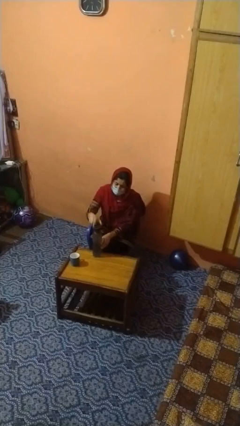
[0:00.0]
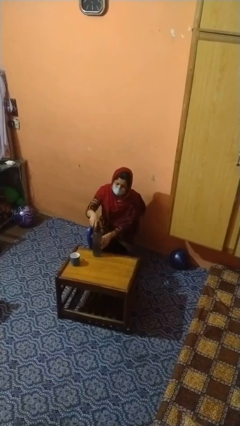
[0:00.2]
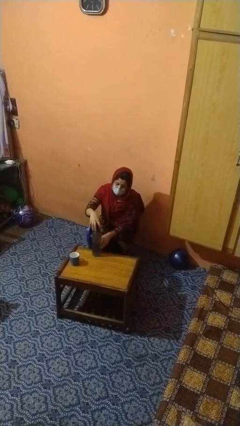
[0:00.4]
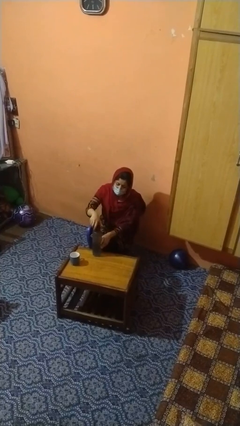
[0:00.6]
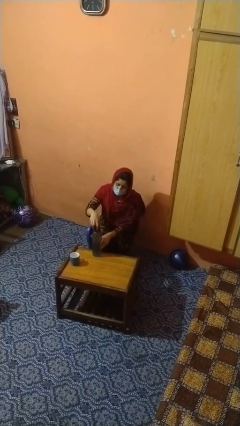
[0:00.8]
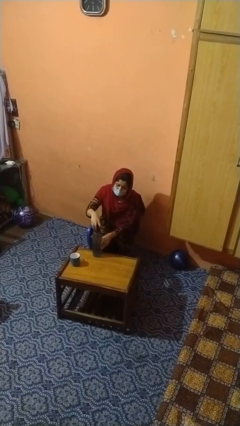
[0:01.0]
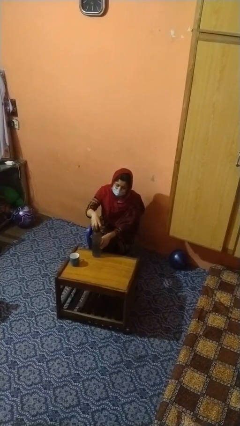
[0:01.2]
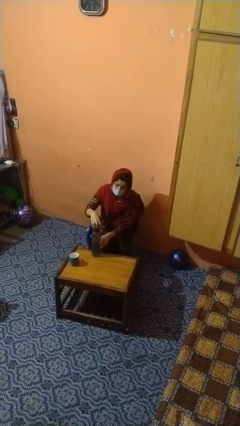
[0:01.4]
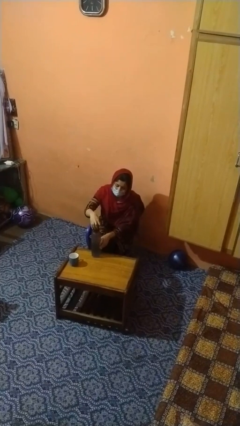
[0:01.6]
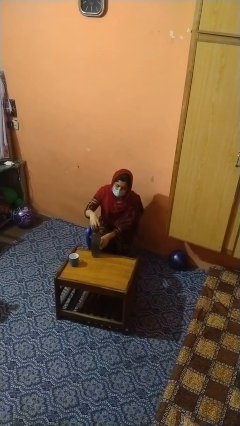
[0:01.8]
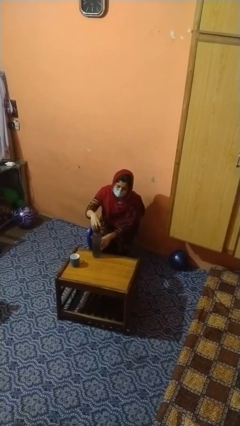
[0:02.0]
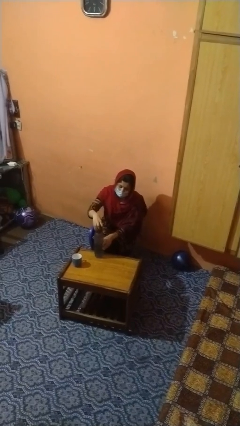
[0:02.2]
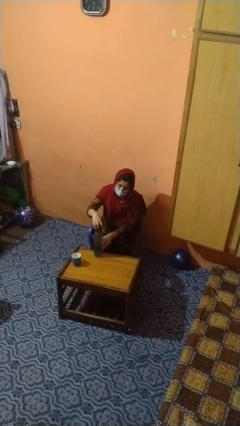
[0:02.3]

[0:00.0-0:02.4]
person unscrews lid from bottle

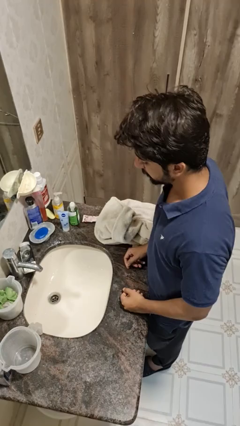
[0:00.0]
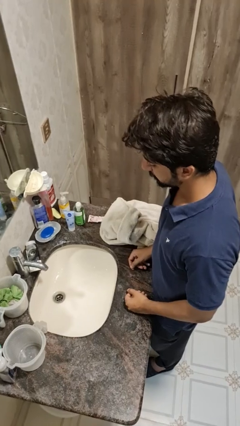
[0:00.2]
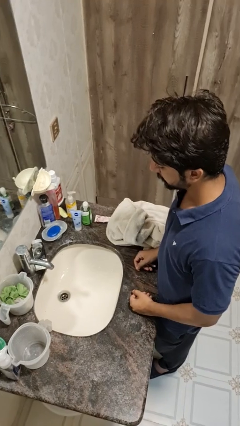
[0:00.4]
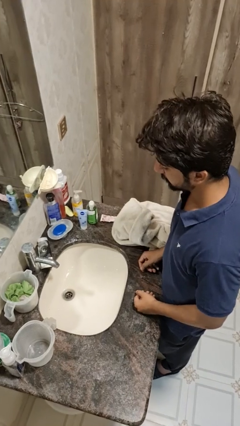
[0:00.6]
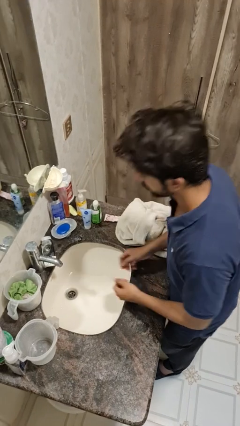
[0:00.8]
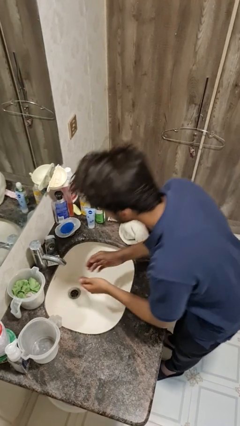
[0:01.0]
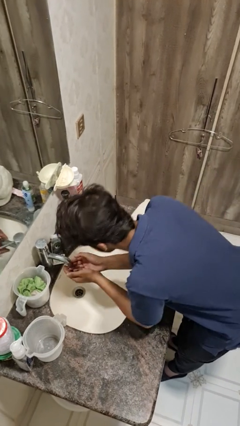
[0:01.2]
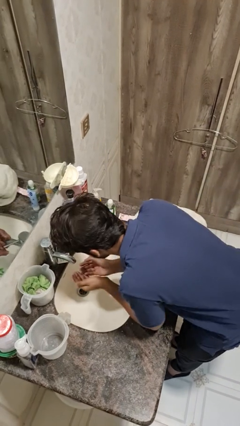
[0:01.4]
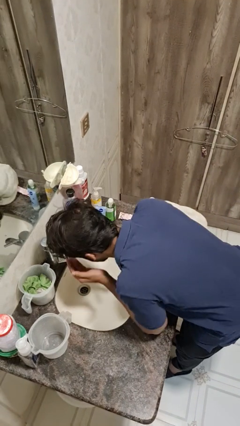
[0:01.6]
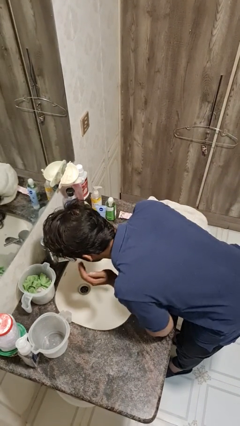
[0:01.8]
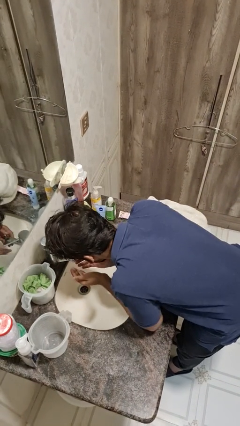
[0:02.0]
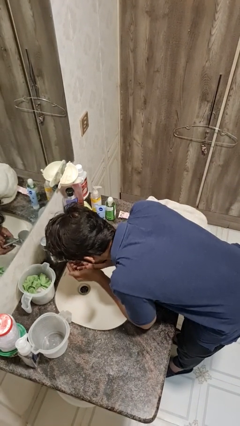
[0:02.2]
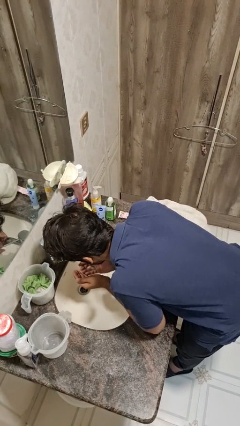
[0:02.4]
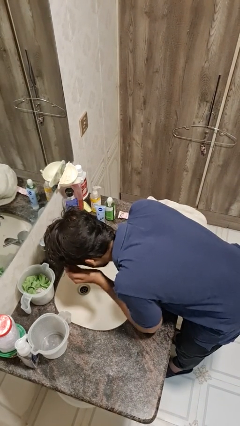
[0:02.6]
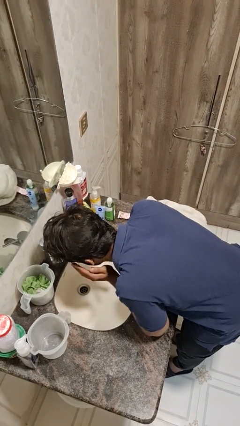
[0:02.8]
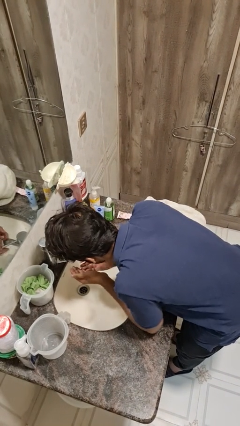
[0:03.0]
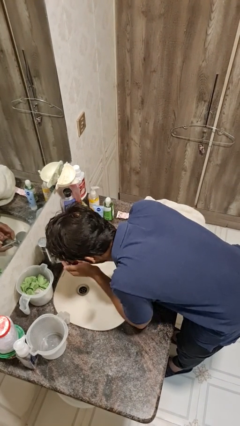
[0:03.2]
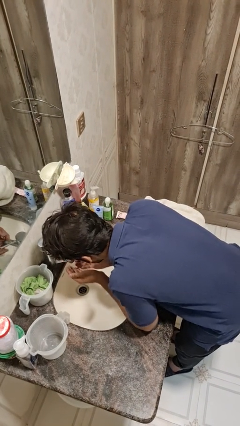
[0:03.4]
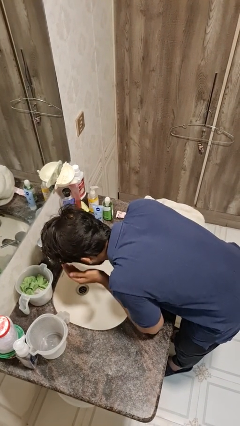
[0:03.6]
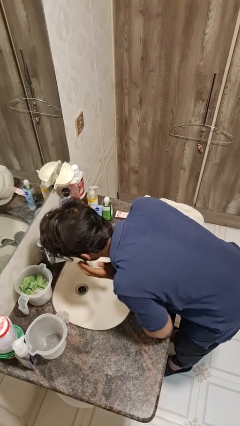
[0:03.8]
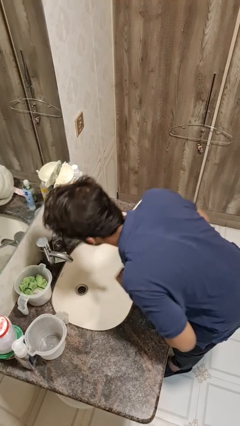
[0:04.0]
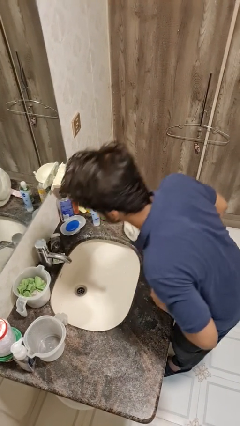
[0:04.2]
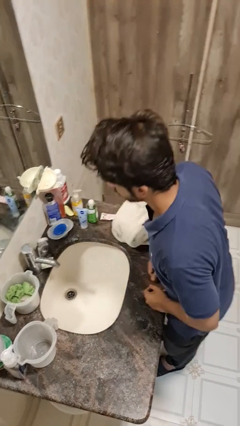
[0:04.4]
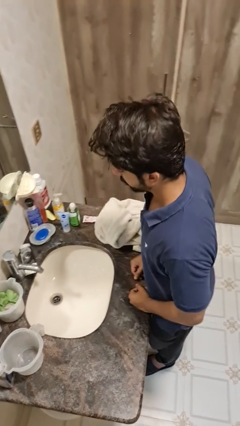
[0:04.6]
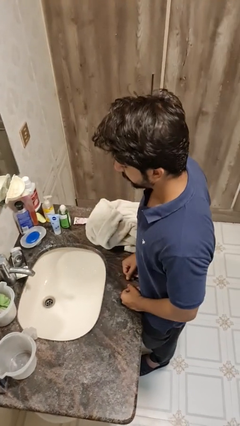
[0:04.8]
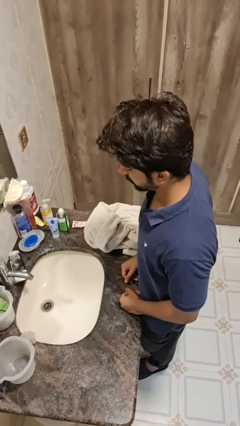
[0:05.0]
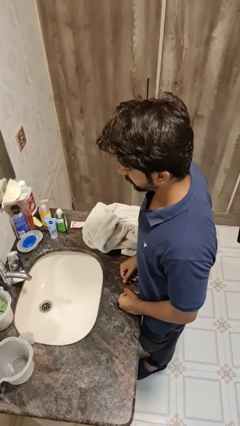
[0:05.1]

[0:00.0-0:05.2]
person washes face

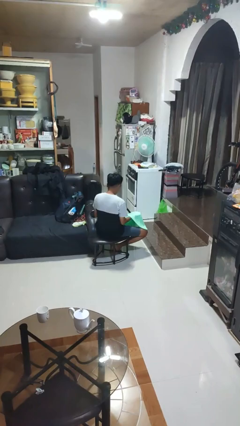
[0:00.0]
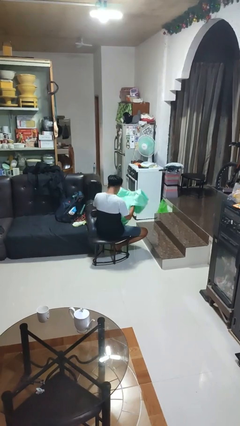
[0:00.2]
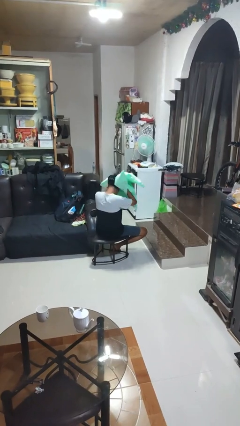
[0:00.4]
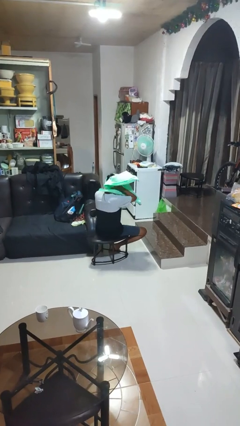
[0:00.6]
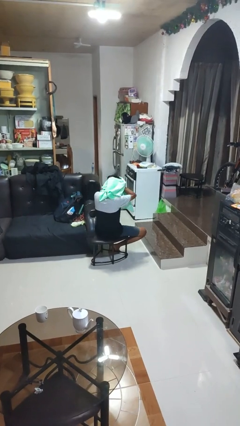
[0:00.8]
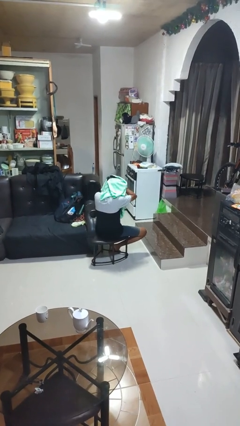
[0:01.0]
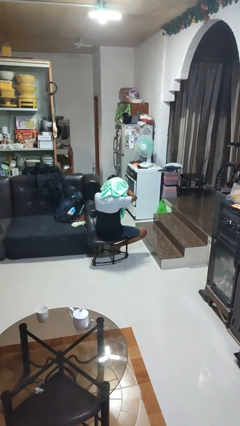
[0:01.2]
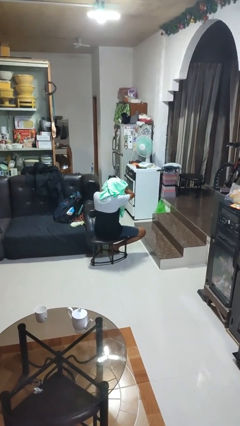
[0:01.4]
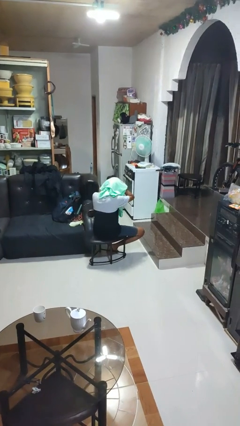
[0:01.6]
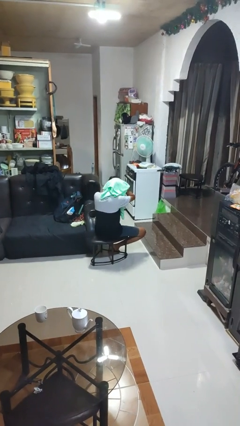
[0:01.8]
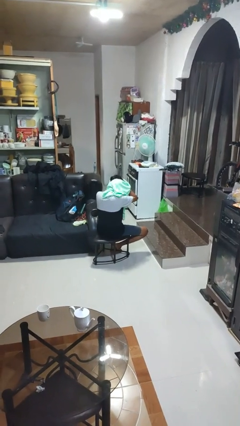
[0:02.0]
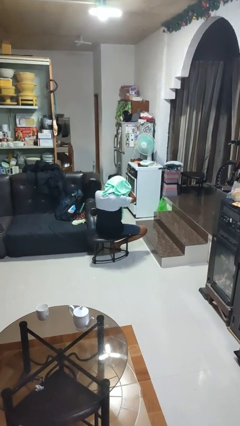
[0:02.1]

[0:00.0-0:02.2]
person dries hair with towel

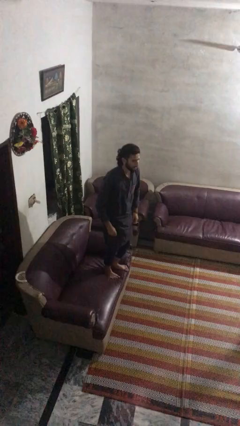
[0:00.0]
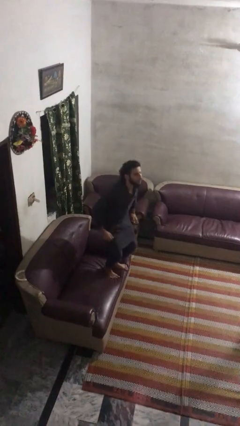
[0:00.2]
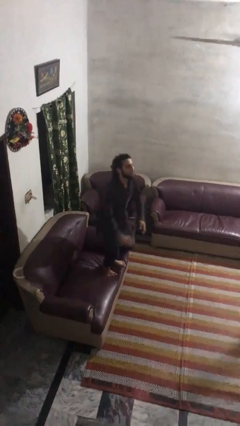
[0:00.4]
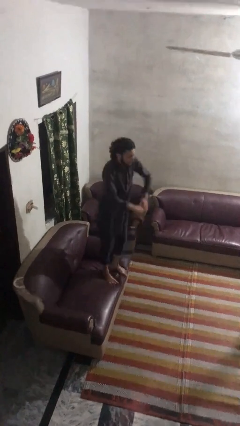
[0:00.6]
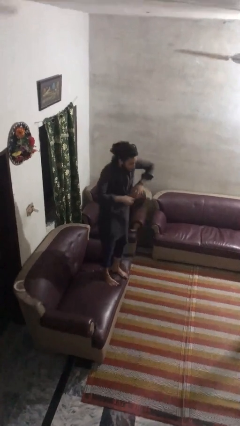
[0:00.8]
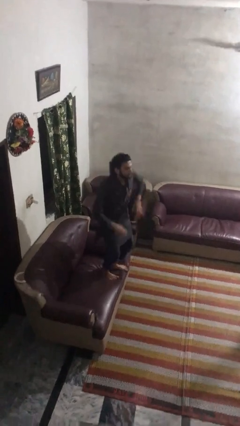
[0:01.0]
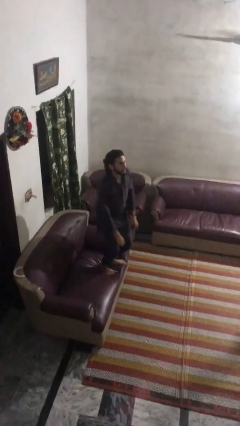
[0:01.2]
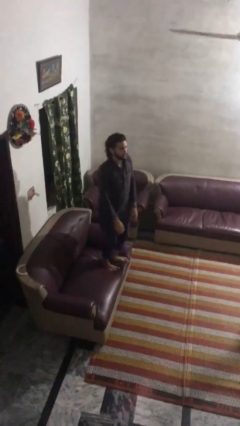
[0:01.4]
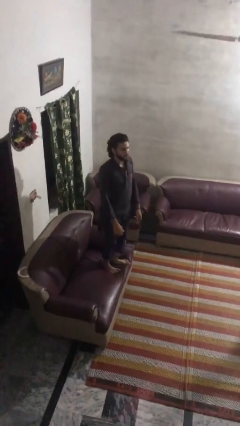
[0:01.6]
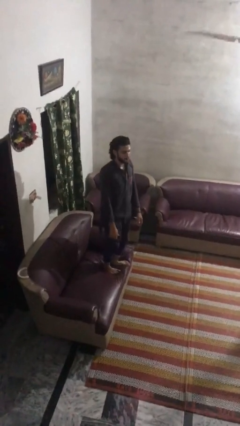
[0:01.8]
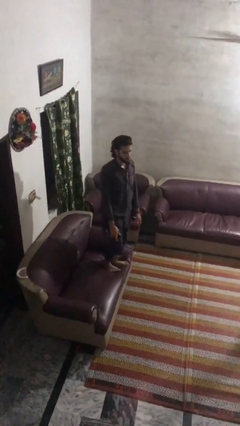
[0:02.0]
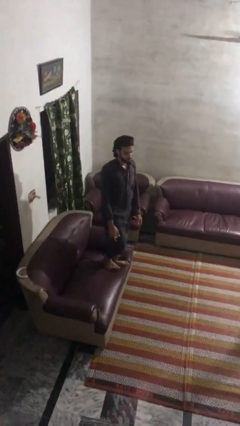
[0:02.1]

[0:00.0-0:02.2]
person jumps on couch

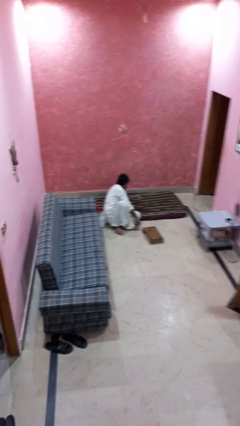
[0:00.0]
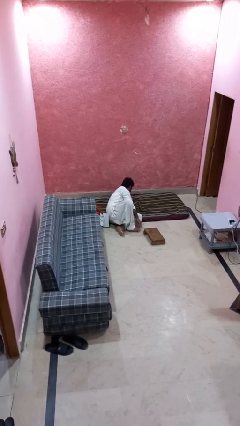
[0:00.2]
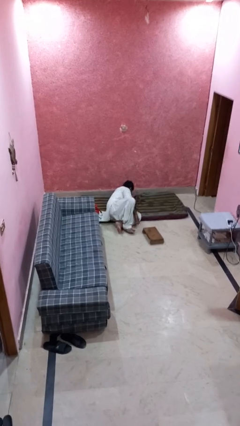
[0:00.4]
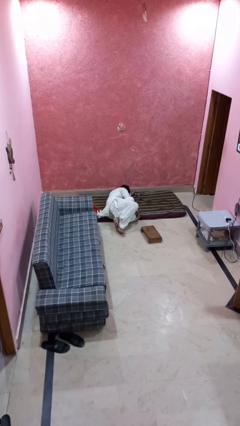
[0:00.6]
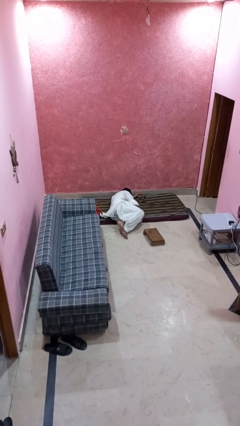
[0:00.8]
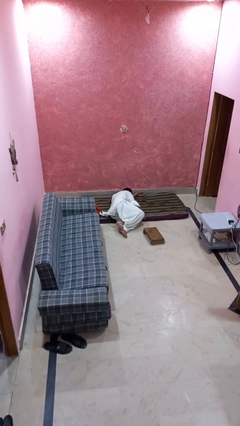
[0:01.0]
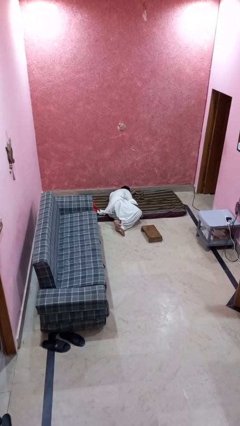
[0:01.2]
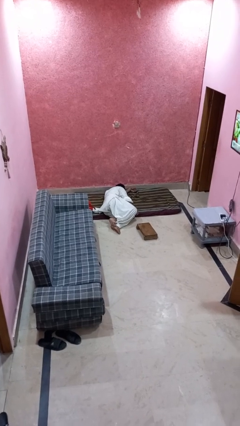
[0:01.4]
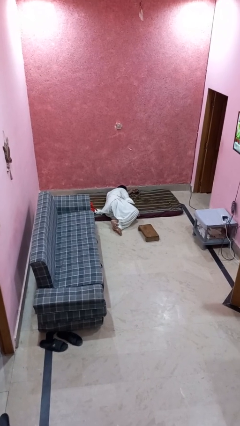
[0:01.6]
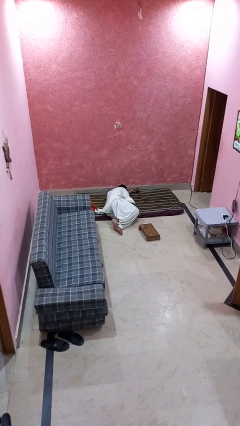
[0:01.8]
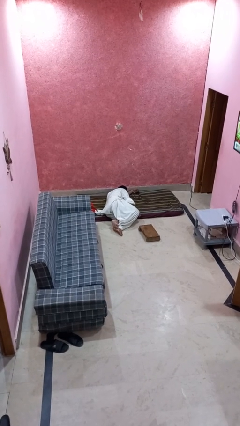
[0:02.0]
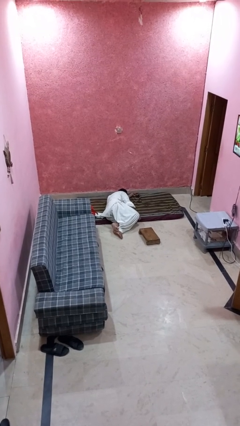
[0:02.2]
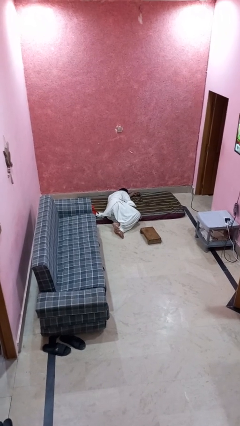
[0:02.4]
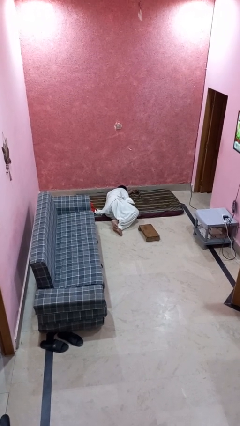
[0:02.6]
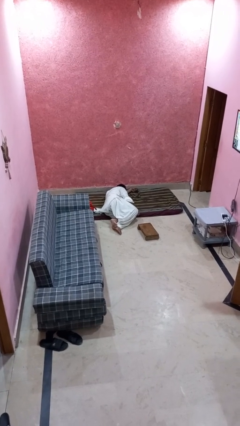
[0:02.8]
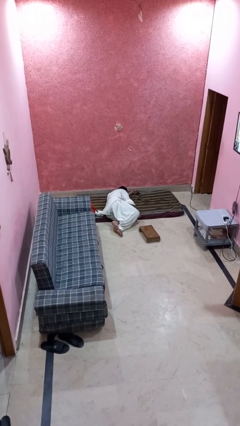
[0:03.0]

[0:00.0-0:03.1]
person lies down on floor

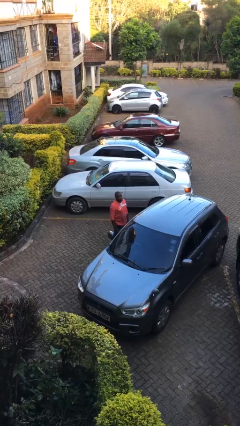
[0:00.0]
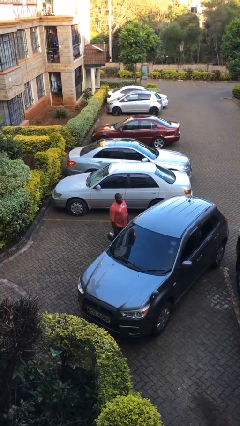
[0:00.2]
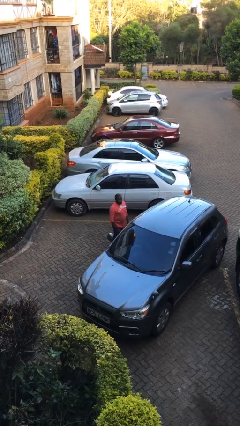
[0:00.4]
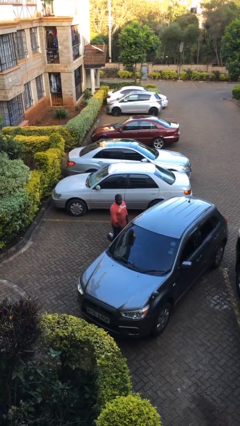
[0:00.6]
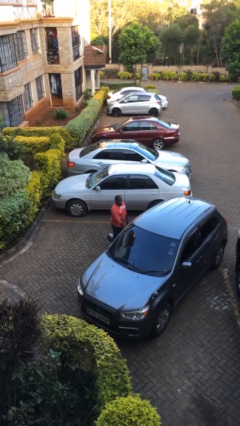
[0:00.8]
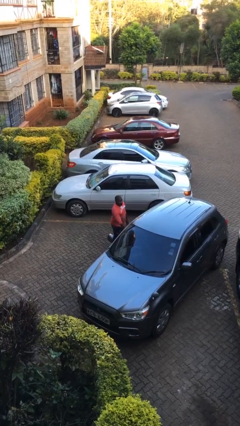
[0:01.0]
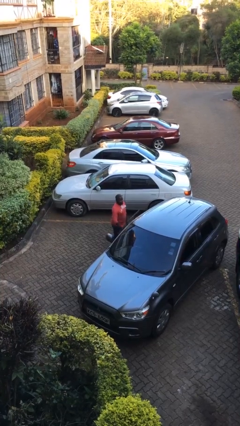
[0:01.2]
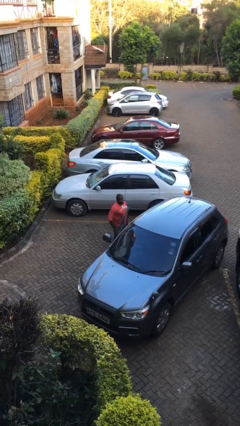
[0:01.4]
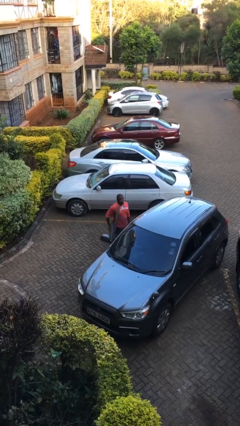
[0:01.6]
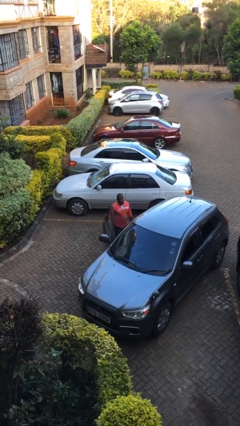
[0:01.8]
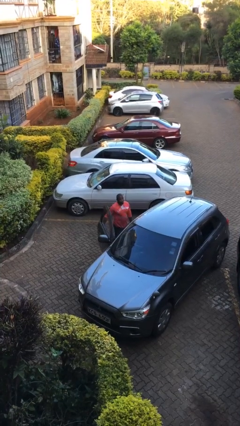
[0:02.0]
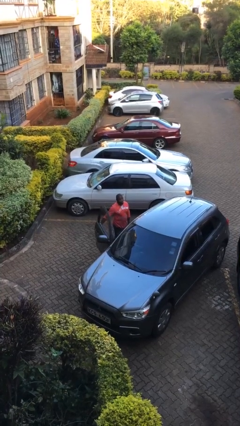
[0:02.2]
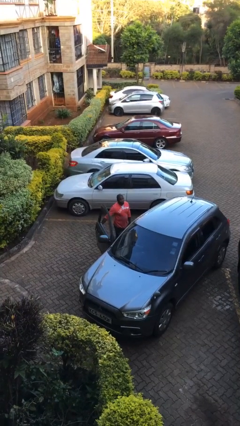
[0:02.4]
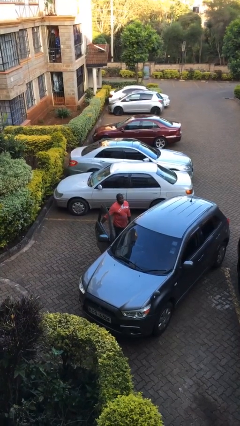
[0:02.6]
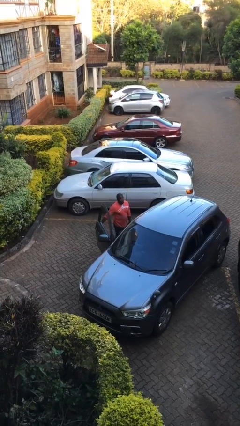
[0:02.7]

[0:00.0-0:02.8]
person opens car door
